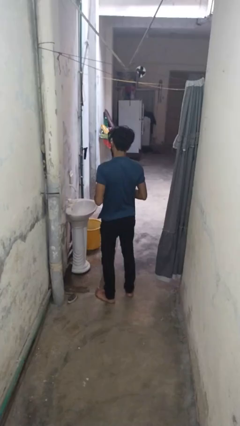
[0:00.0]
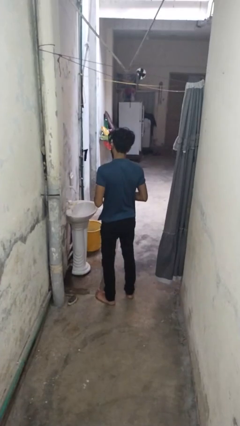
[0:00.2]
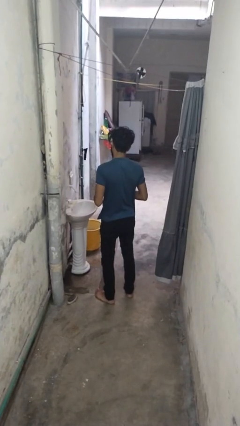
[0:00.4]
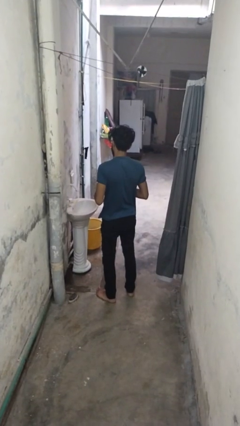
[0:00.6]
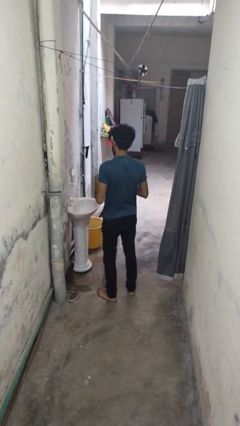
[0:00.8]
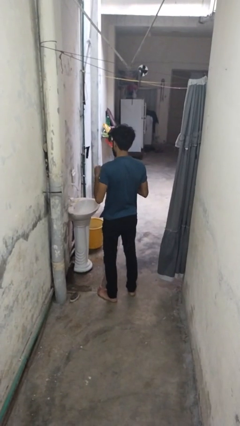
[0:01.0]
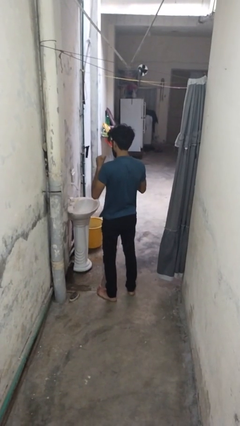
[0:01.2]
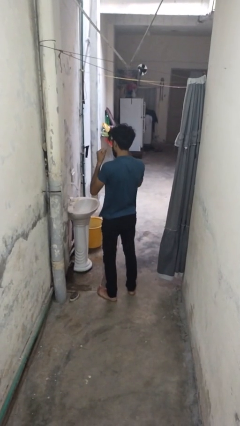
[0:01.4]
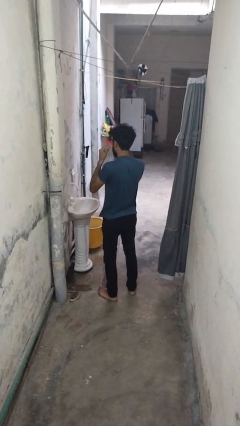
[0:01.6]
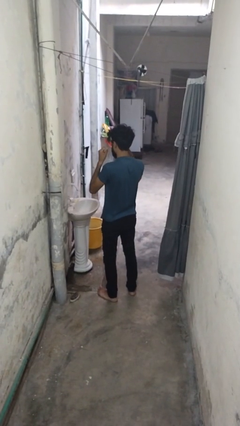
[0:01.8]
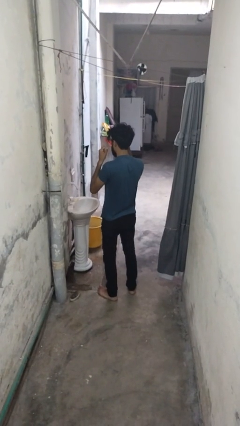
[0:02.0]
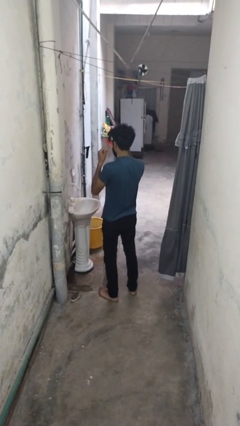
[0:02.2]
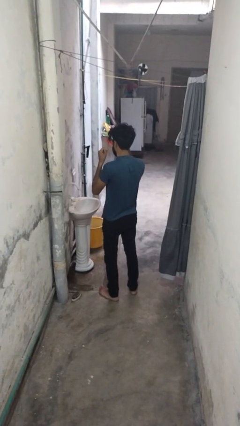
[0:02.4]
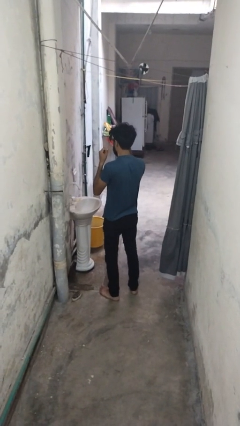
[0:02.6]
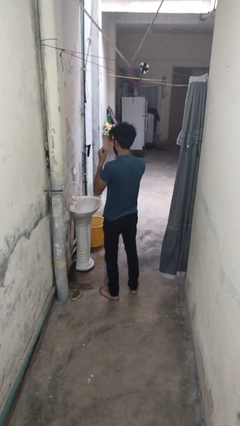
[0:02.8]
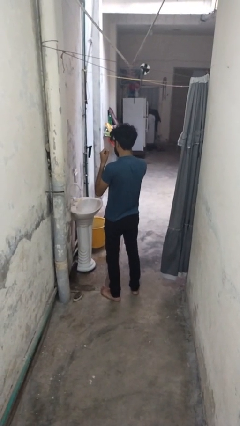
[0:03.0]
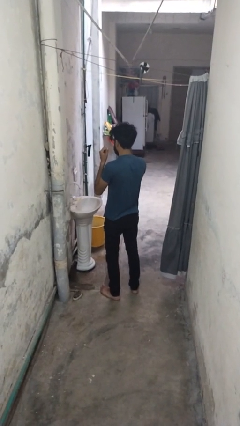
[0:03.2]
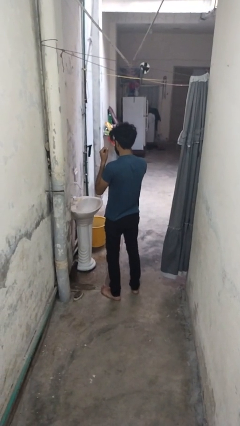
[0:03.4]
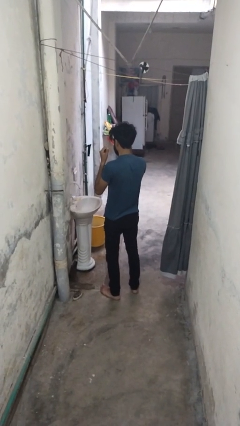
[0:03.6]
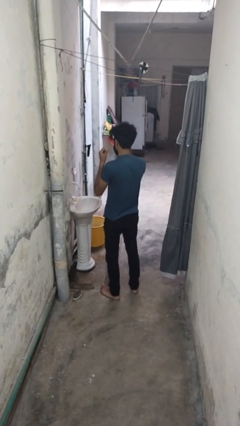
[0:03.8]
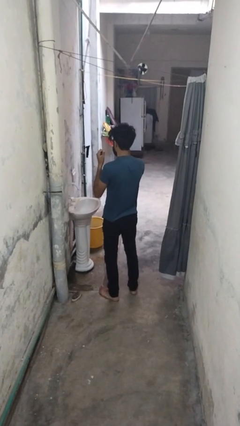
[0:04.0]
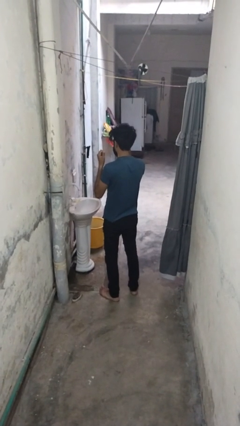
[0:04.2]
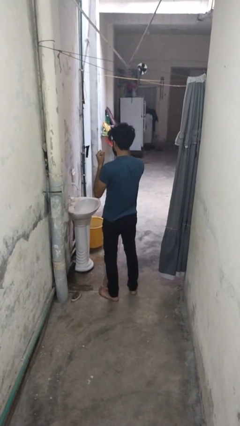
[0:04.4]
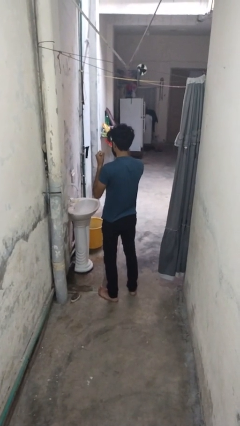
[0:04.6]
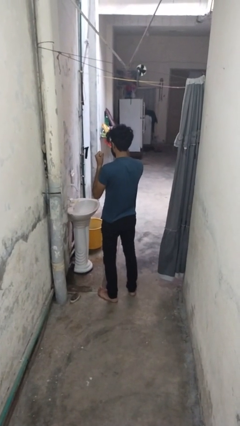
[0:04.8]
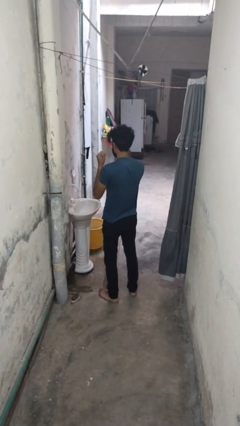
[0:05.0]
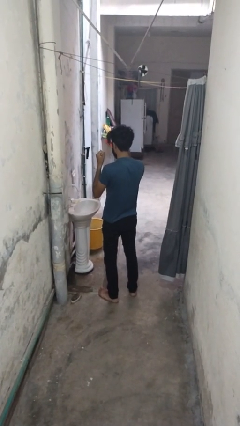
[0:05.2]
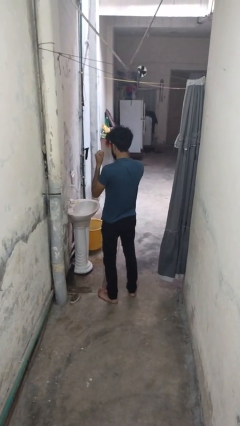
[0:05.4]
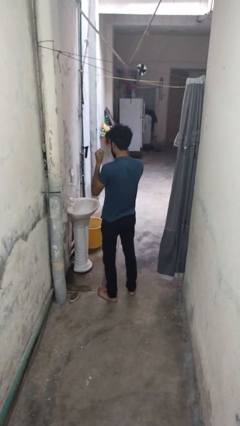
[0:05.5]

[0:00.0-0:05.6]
person flosses

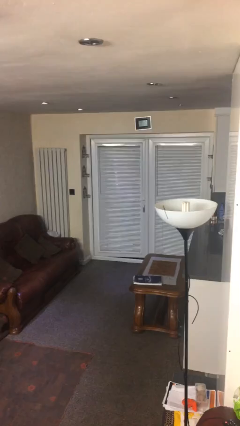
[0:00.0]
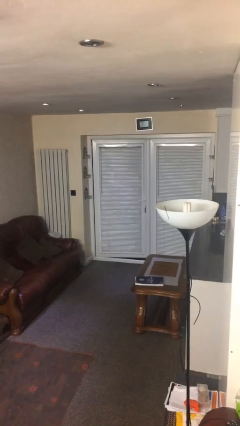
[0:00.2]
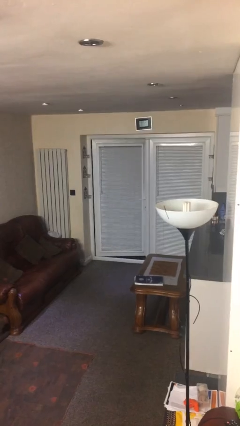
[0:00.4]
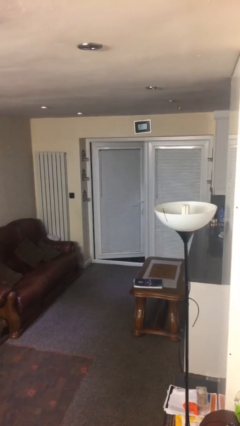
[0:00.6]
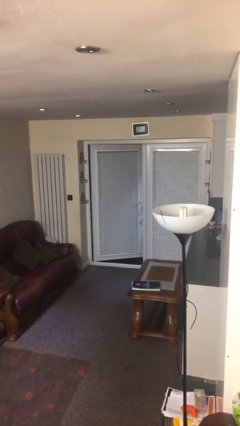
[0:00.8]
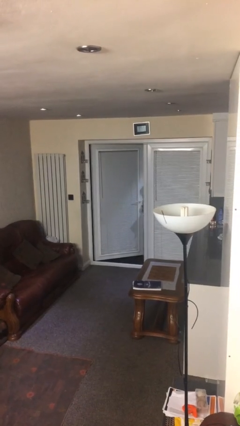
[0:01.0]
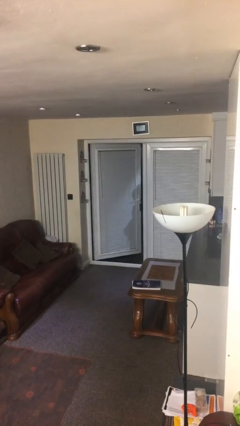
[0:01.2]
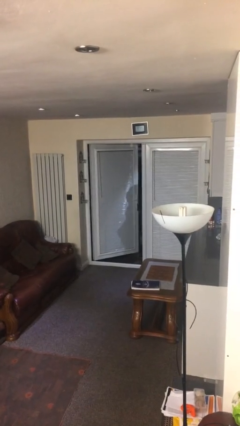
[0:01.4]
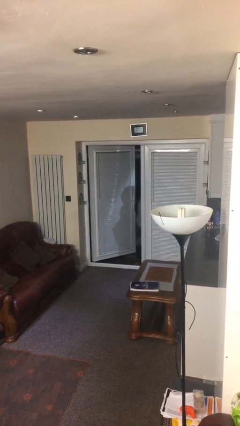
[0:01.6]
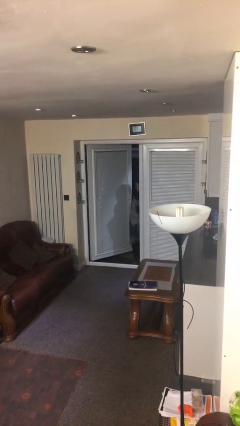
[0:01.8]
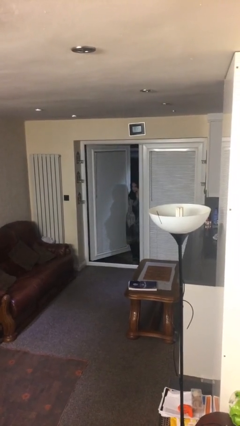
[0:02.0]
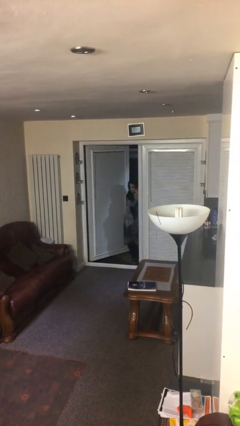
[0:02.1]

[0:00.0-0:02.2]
person opens facility door

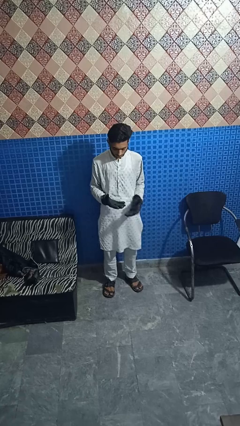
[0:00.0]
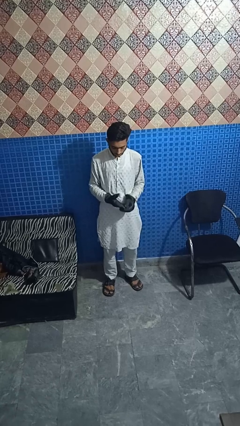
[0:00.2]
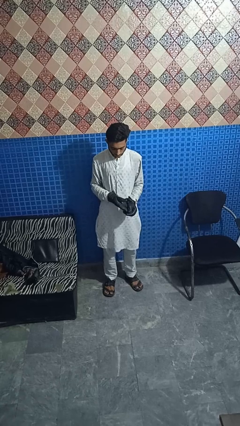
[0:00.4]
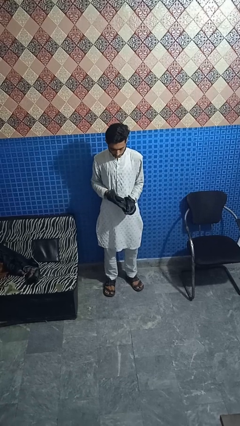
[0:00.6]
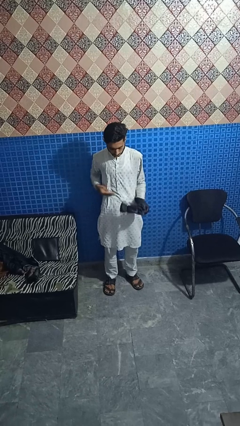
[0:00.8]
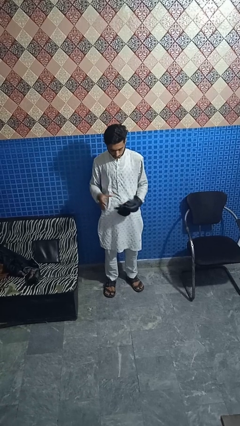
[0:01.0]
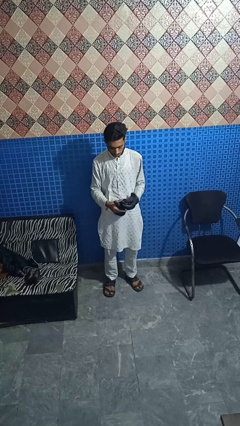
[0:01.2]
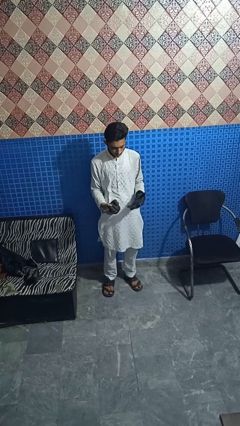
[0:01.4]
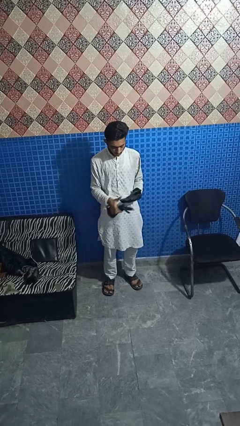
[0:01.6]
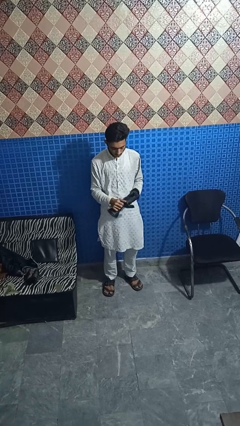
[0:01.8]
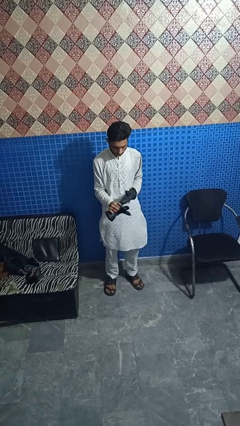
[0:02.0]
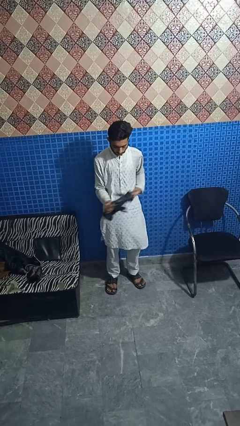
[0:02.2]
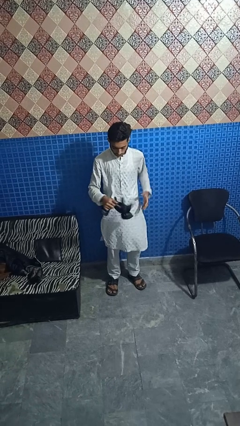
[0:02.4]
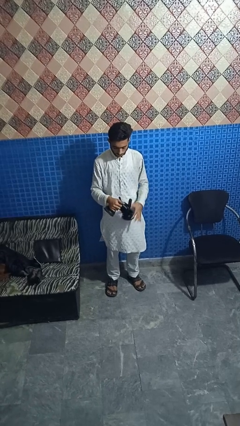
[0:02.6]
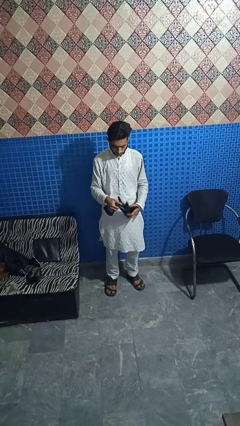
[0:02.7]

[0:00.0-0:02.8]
person takes off gloves

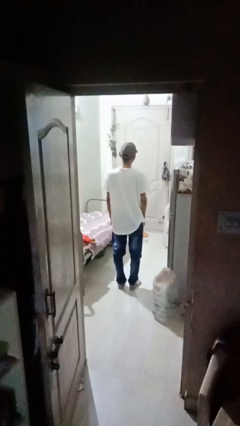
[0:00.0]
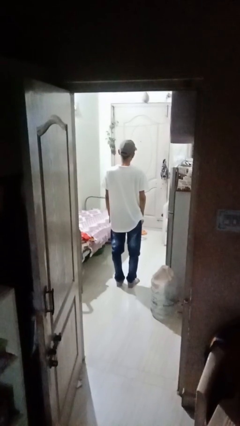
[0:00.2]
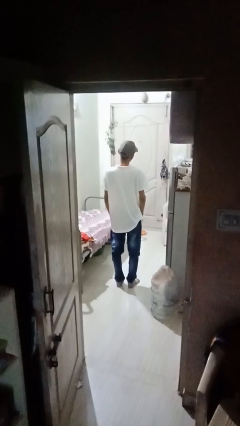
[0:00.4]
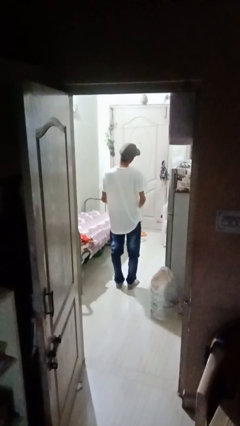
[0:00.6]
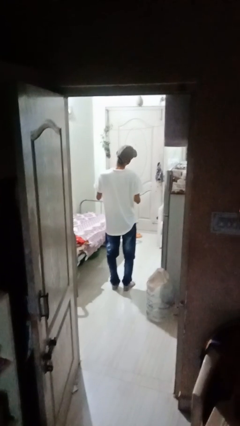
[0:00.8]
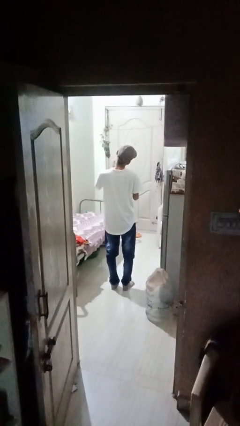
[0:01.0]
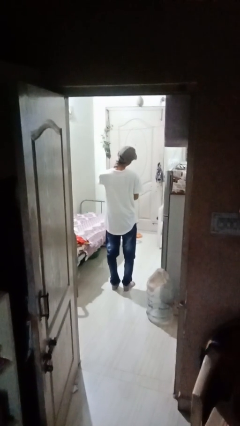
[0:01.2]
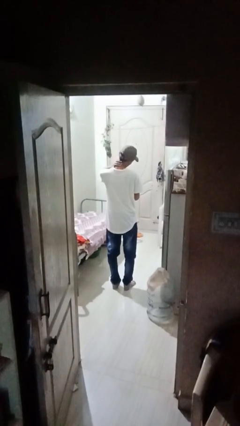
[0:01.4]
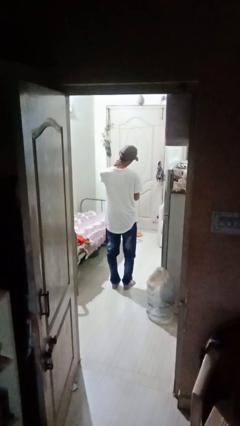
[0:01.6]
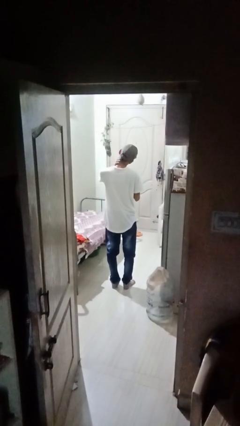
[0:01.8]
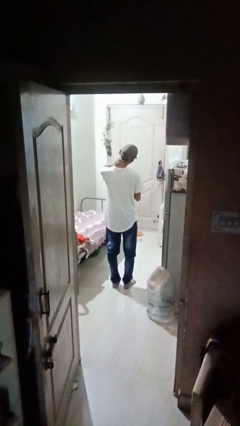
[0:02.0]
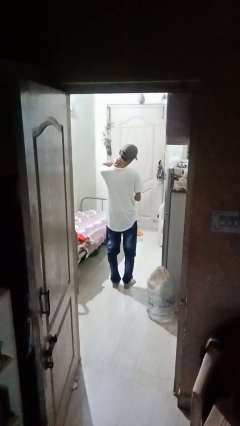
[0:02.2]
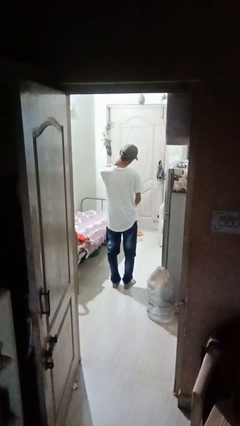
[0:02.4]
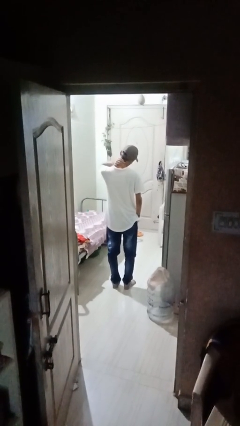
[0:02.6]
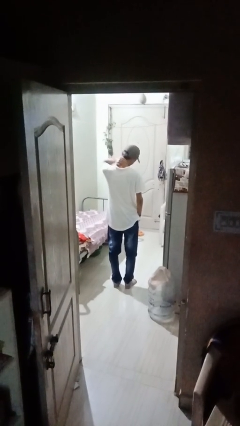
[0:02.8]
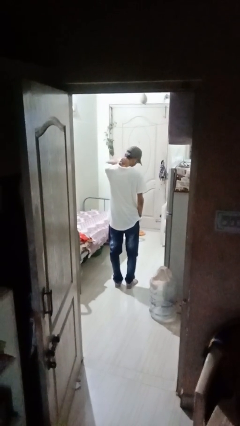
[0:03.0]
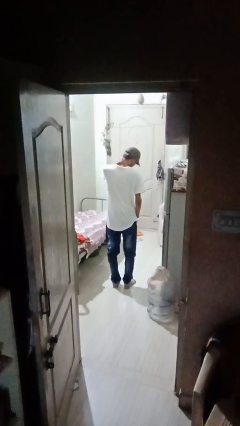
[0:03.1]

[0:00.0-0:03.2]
person rubs neck

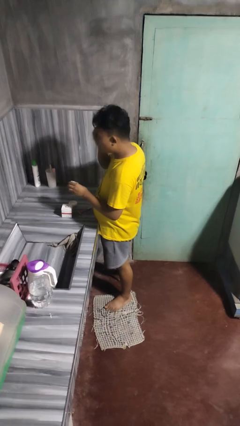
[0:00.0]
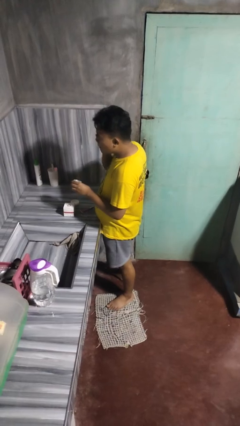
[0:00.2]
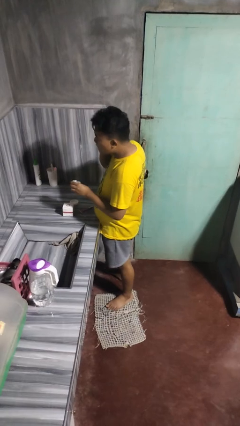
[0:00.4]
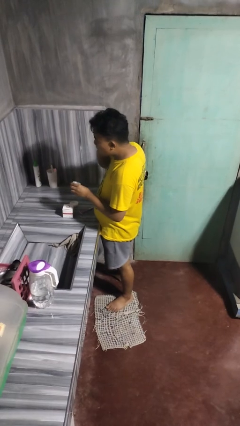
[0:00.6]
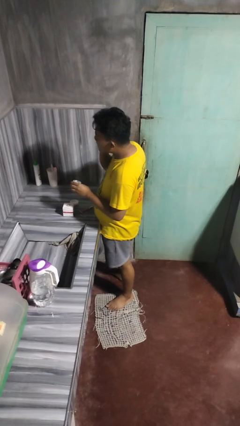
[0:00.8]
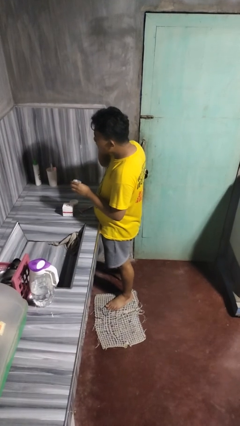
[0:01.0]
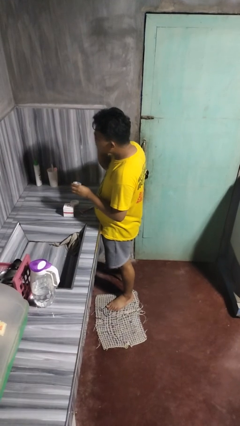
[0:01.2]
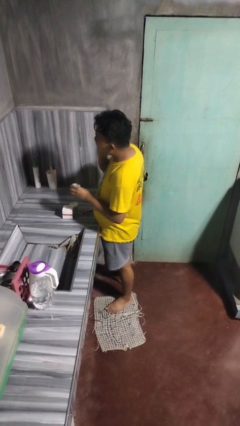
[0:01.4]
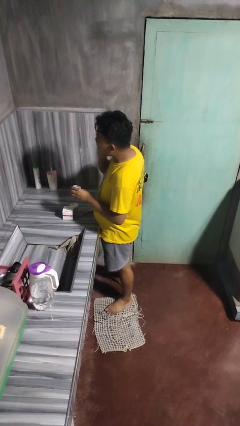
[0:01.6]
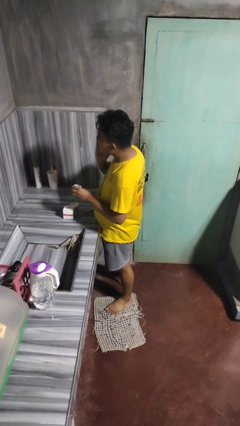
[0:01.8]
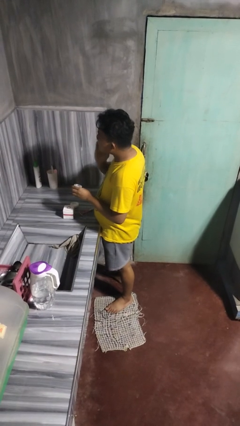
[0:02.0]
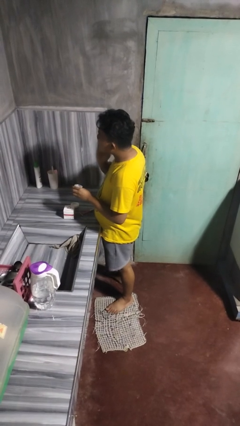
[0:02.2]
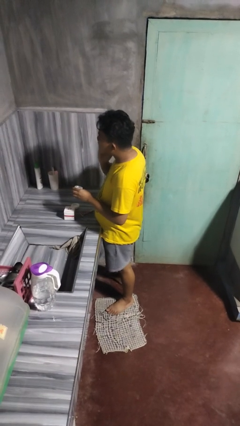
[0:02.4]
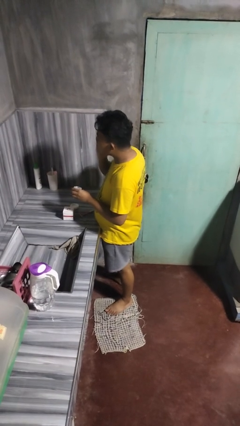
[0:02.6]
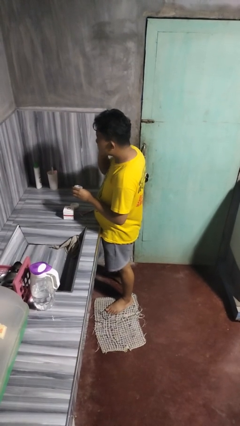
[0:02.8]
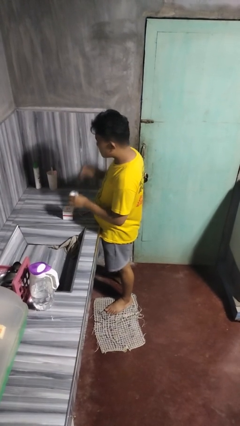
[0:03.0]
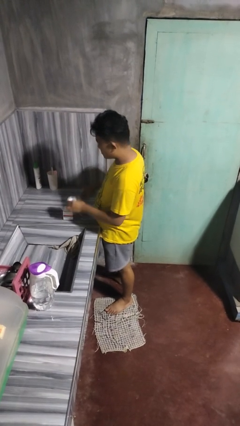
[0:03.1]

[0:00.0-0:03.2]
person applies shaving cream

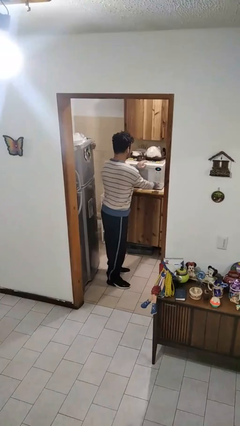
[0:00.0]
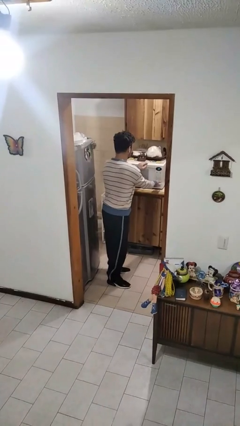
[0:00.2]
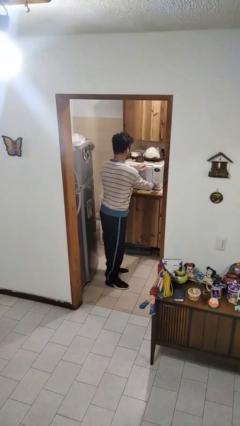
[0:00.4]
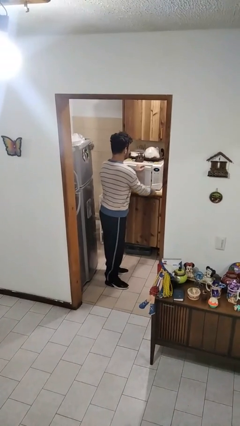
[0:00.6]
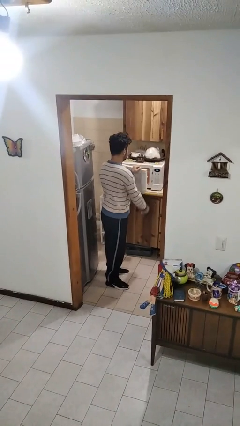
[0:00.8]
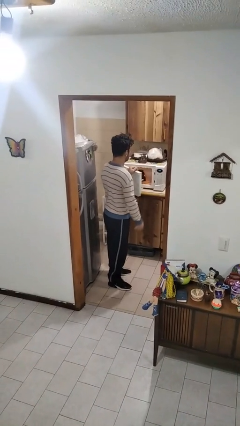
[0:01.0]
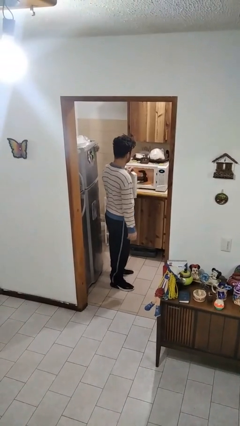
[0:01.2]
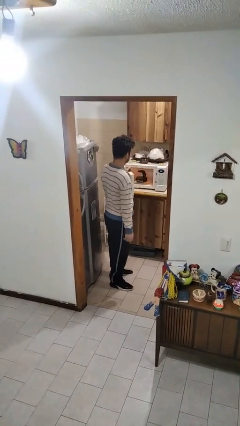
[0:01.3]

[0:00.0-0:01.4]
person opens microwave
